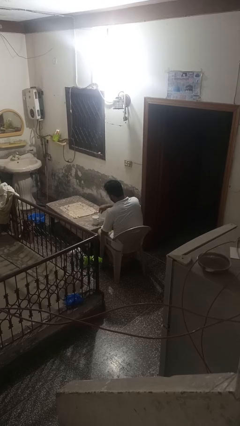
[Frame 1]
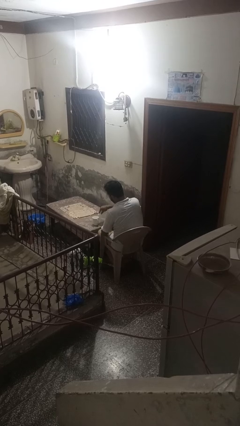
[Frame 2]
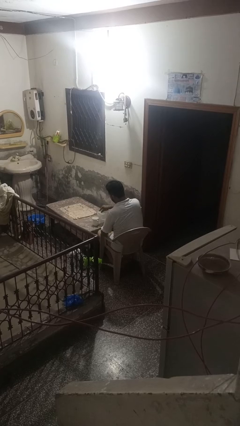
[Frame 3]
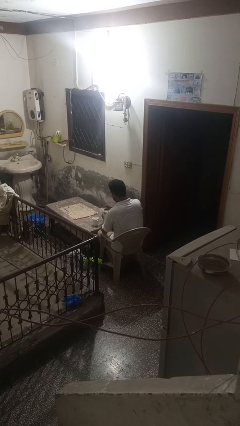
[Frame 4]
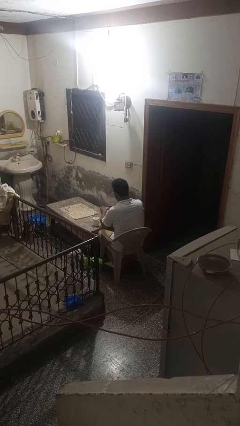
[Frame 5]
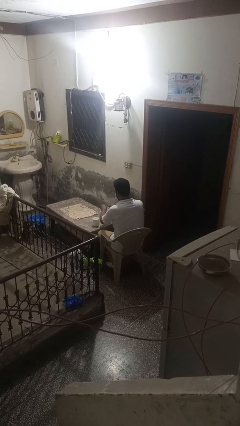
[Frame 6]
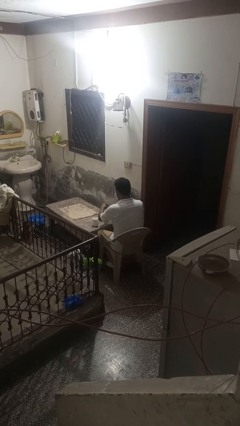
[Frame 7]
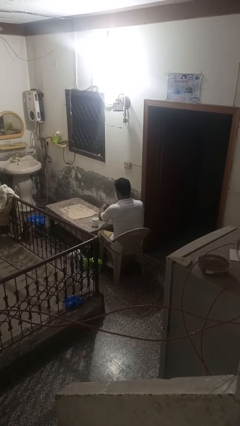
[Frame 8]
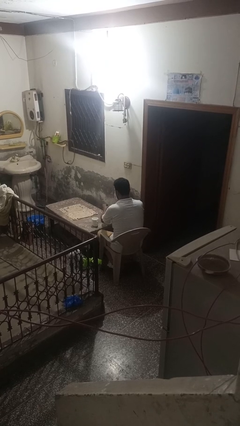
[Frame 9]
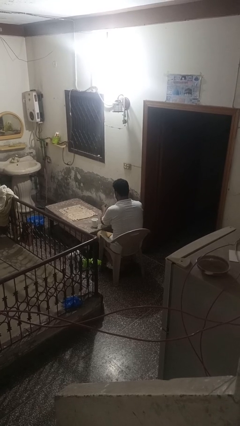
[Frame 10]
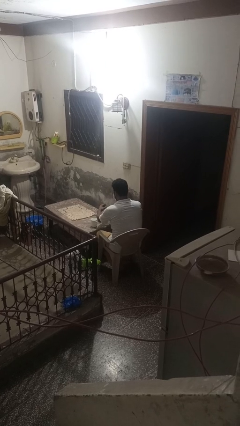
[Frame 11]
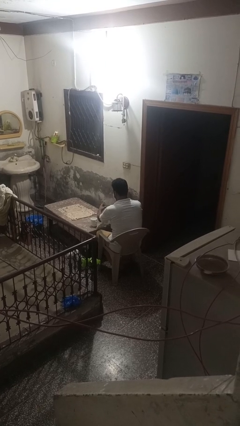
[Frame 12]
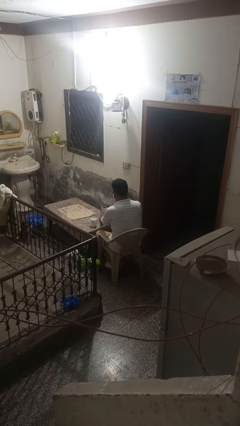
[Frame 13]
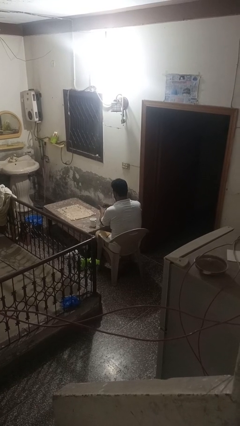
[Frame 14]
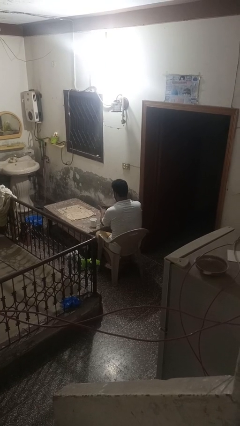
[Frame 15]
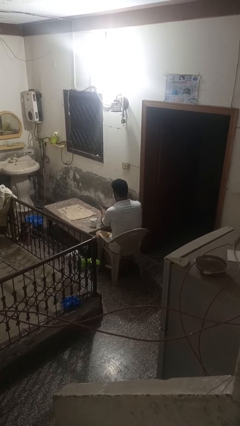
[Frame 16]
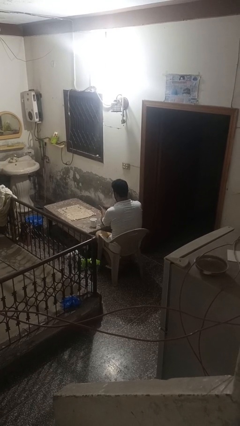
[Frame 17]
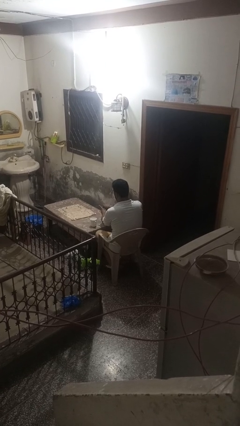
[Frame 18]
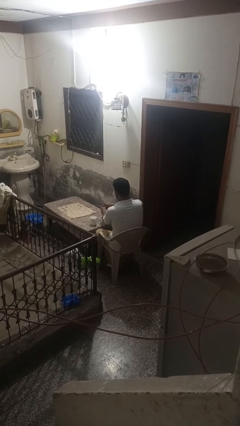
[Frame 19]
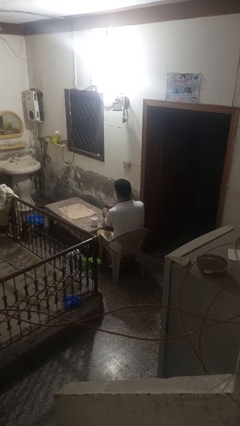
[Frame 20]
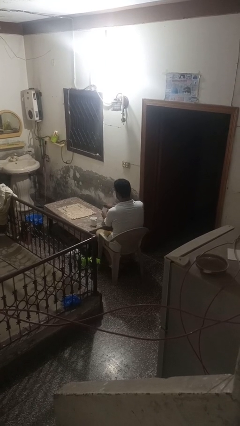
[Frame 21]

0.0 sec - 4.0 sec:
person screws lid to bottle

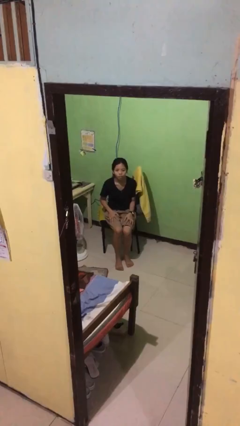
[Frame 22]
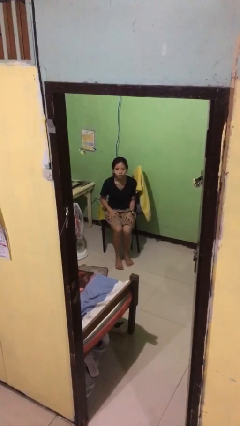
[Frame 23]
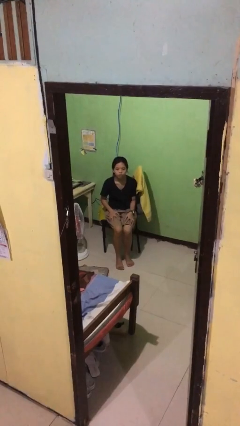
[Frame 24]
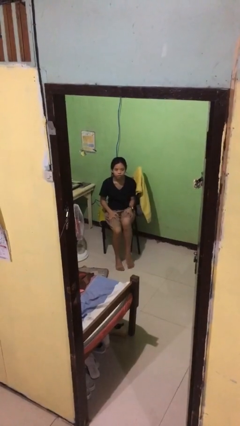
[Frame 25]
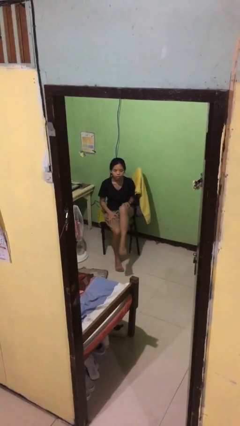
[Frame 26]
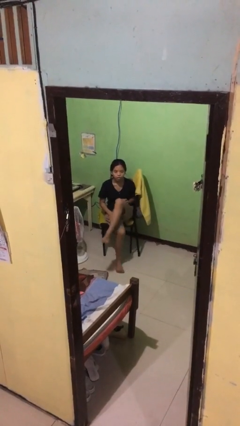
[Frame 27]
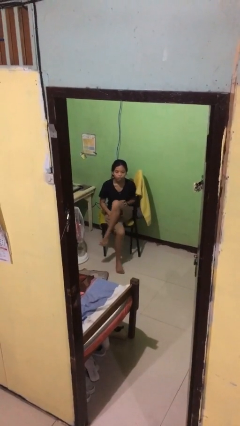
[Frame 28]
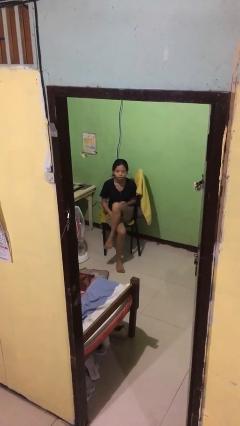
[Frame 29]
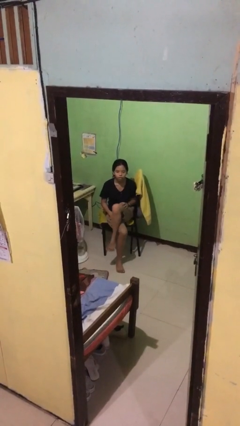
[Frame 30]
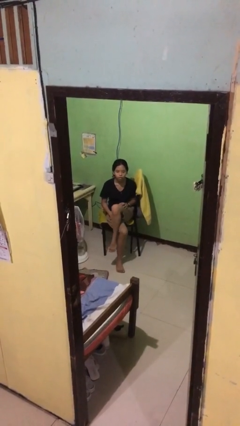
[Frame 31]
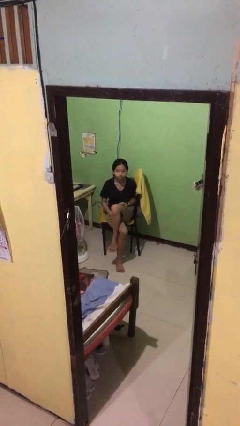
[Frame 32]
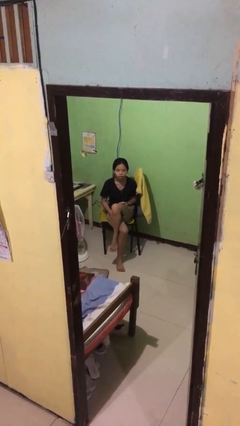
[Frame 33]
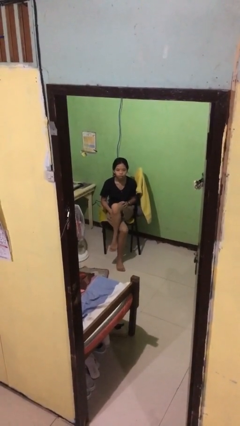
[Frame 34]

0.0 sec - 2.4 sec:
person crosses legs

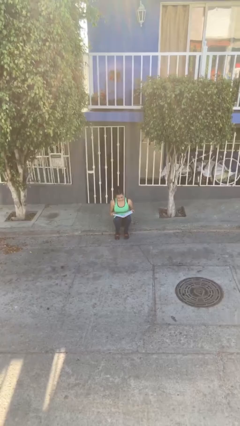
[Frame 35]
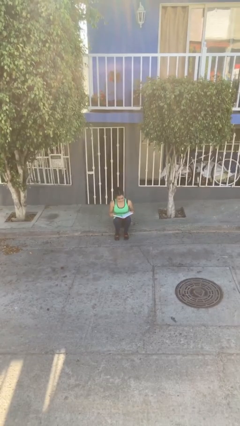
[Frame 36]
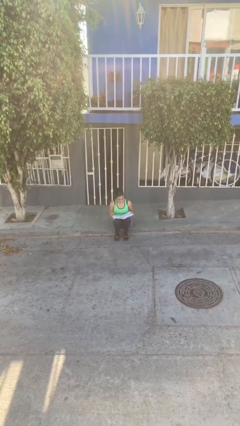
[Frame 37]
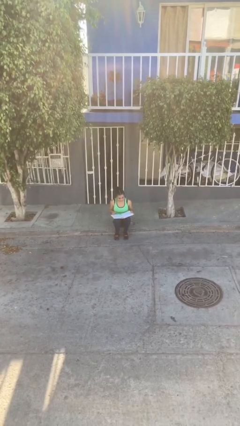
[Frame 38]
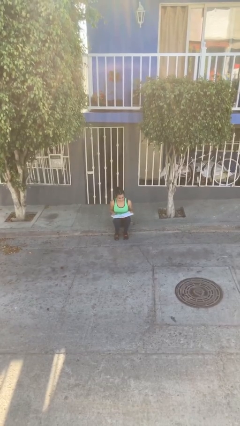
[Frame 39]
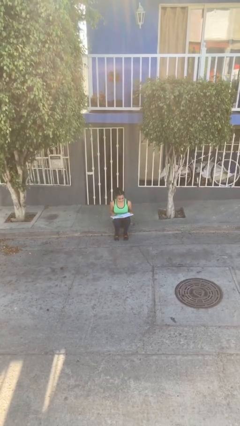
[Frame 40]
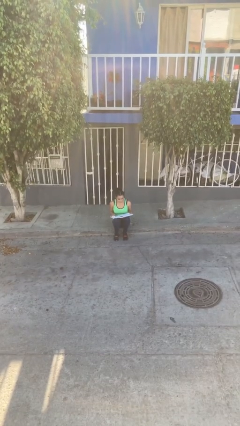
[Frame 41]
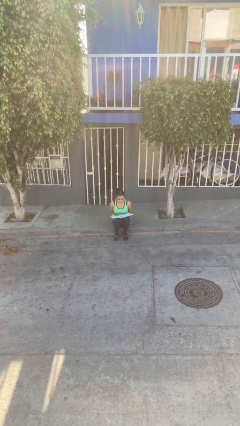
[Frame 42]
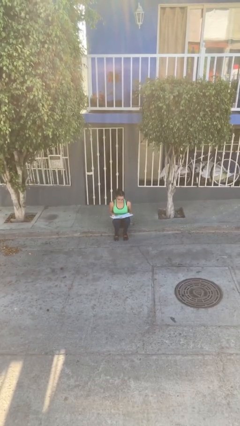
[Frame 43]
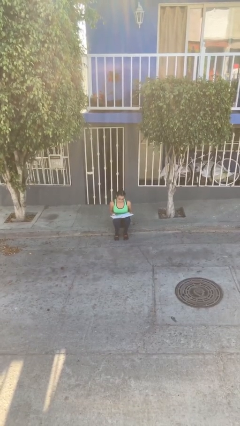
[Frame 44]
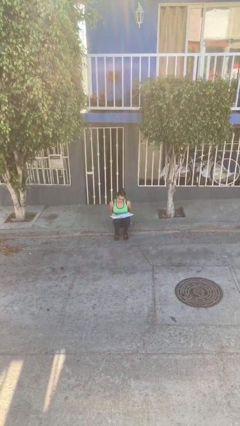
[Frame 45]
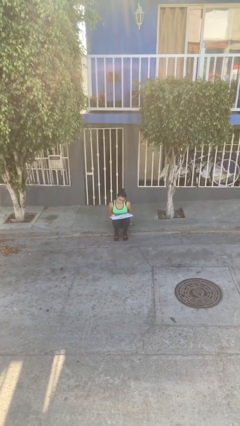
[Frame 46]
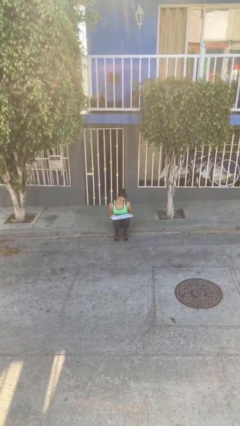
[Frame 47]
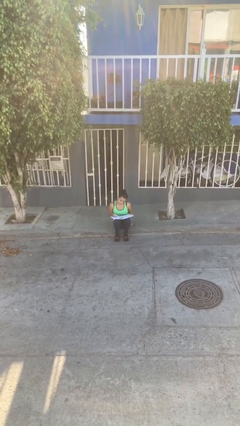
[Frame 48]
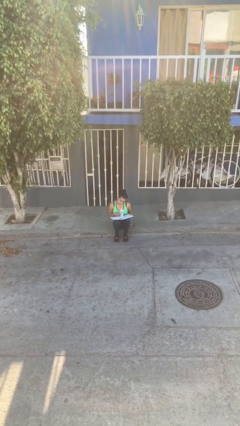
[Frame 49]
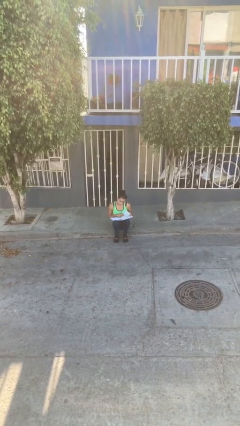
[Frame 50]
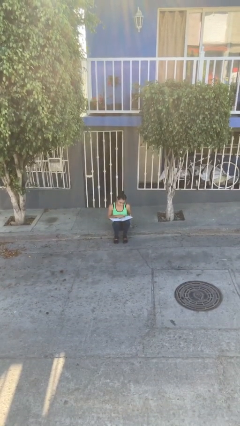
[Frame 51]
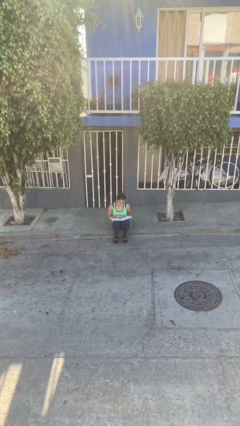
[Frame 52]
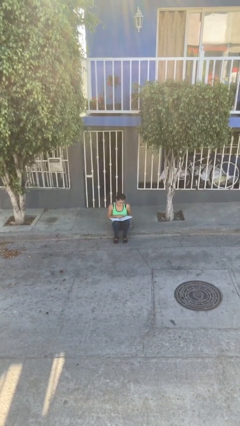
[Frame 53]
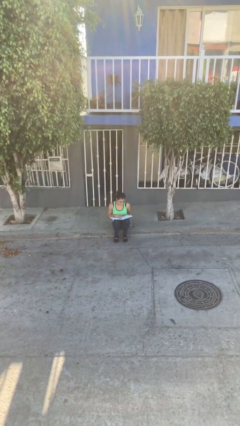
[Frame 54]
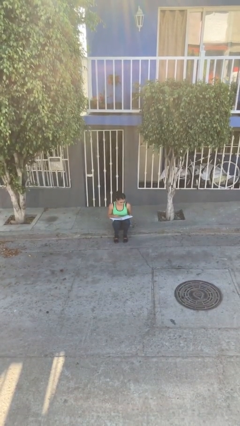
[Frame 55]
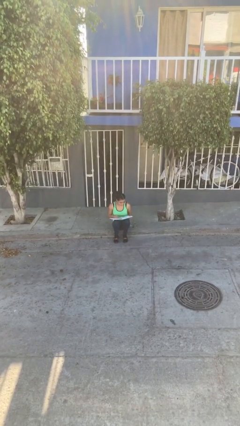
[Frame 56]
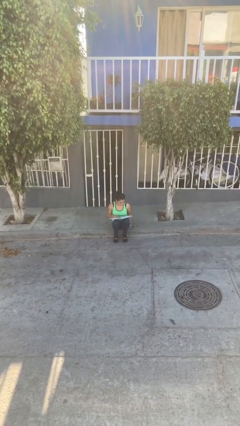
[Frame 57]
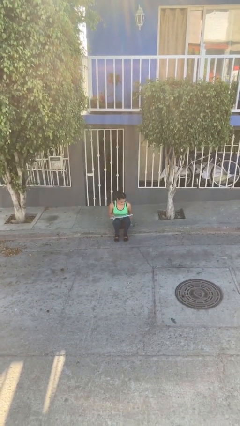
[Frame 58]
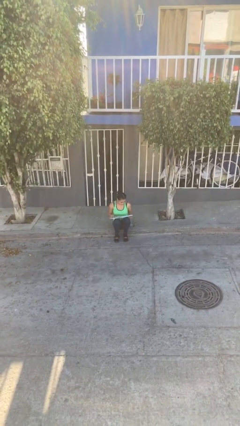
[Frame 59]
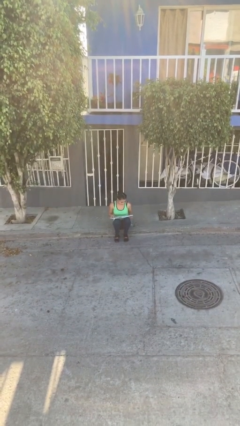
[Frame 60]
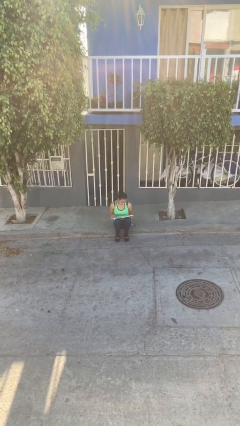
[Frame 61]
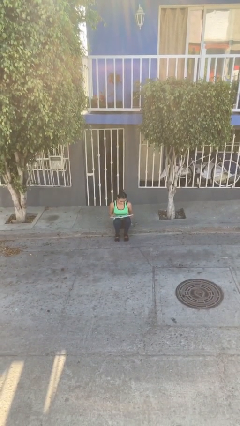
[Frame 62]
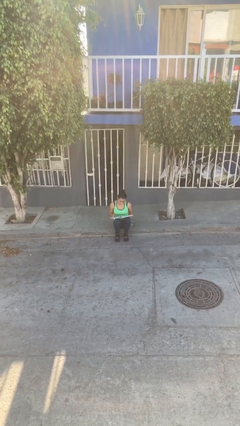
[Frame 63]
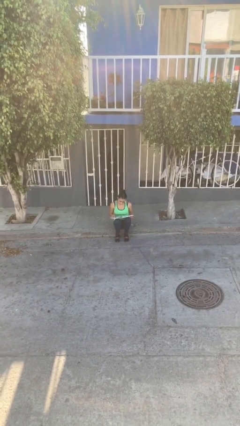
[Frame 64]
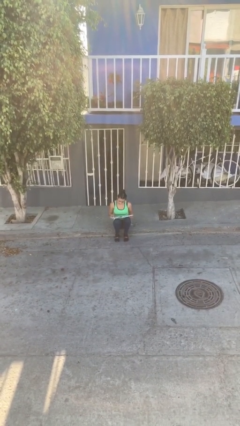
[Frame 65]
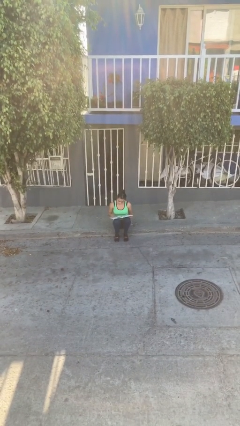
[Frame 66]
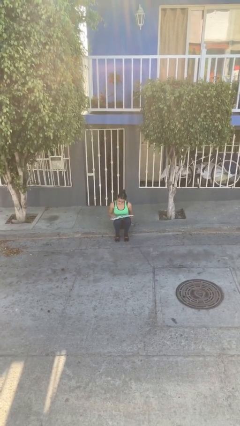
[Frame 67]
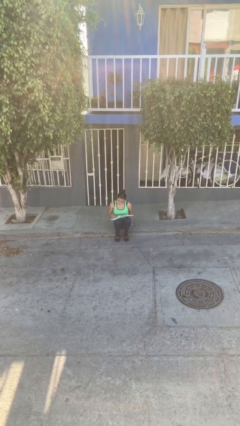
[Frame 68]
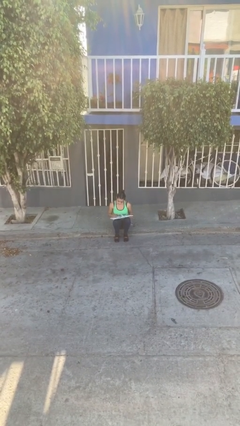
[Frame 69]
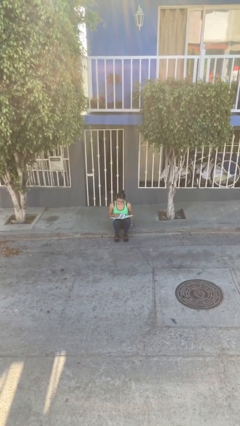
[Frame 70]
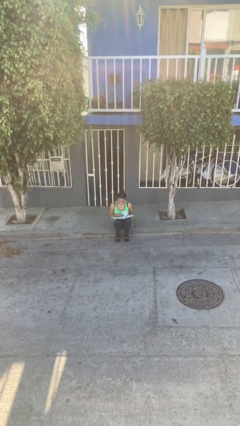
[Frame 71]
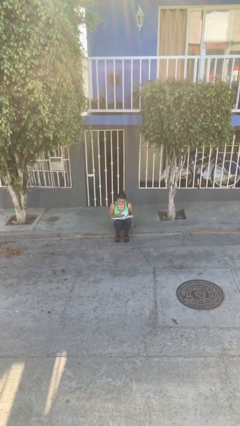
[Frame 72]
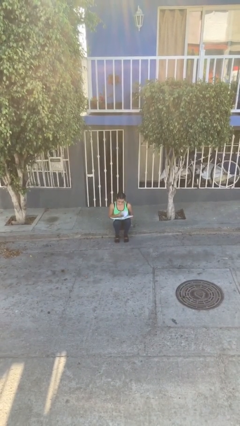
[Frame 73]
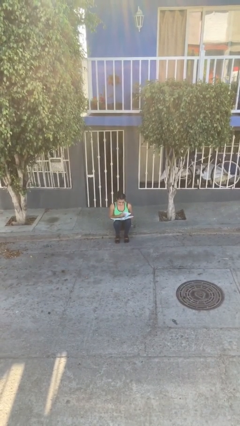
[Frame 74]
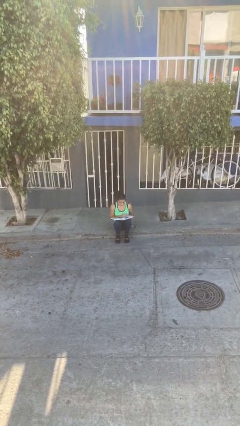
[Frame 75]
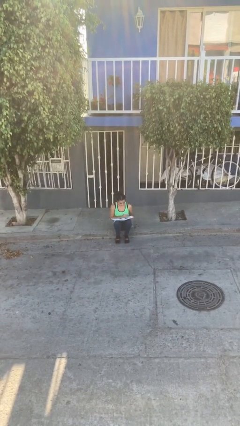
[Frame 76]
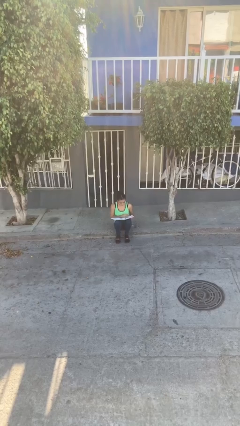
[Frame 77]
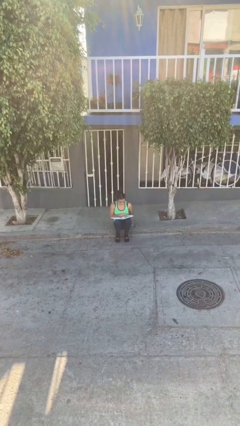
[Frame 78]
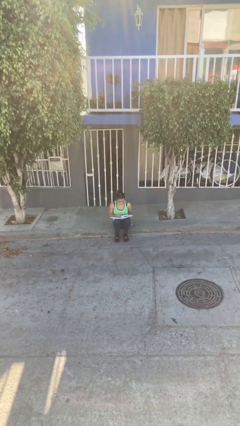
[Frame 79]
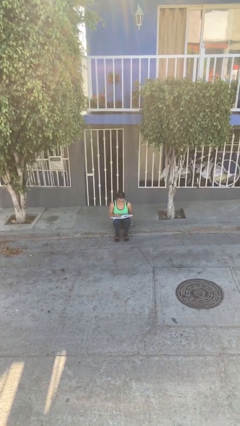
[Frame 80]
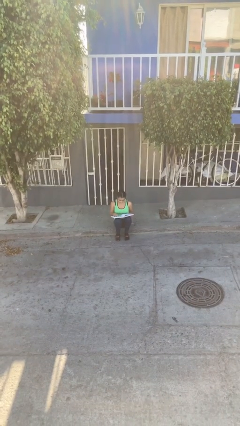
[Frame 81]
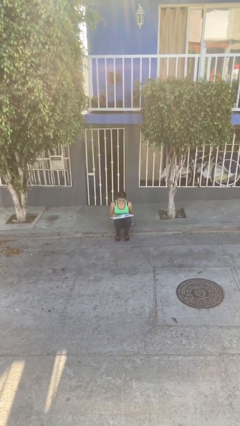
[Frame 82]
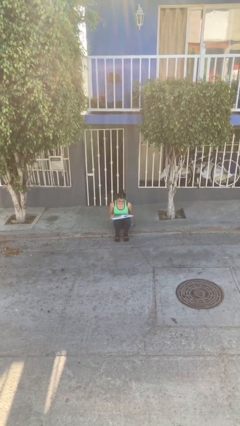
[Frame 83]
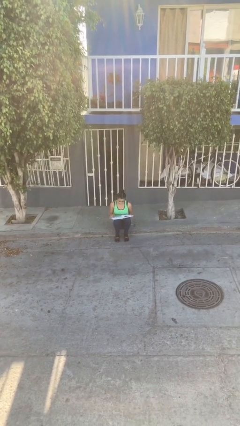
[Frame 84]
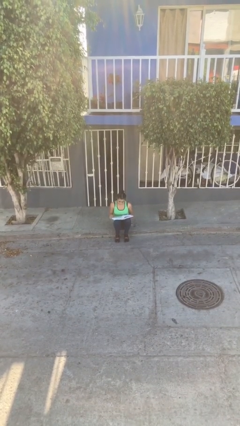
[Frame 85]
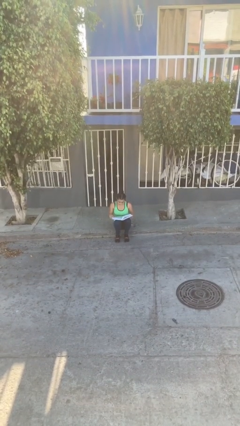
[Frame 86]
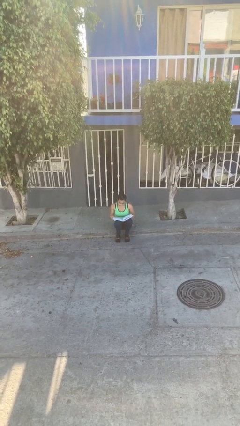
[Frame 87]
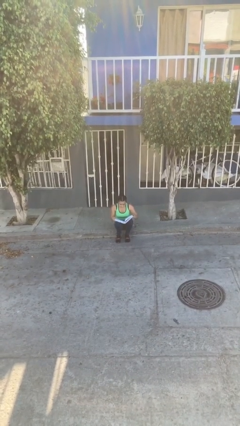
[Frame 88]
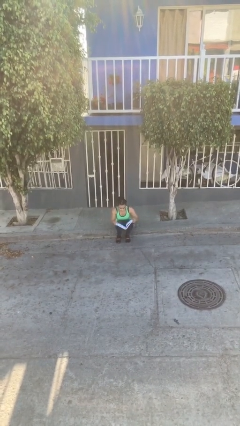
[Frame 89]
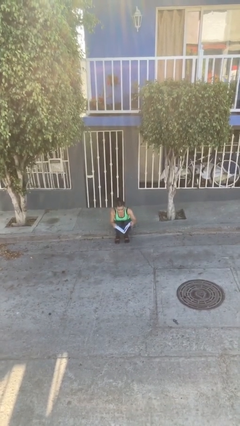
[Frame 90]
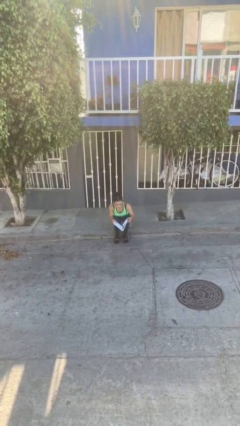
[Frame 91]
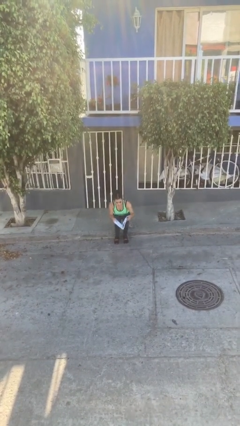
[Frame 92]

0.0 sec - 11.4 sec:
person reads document
